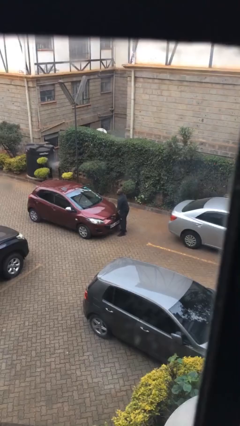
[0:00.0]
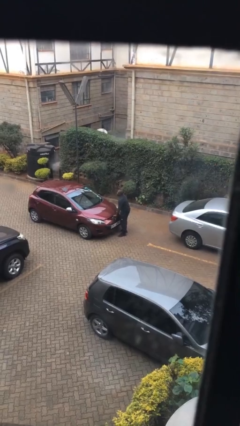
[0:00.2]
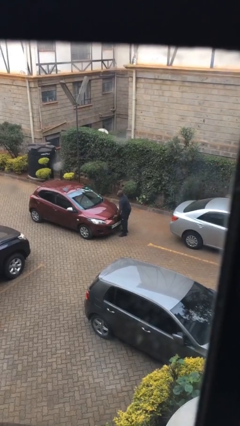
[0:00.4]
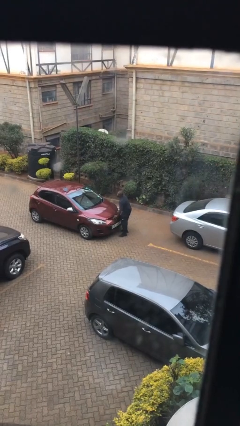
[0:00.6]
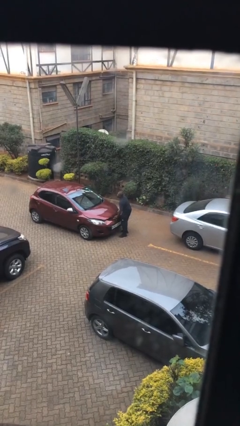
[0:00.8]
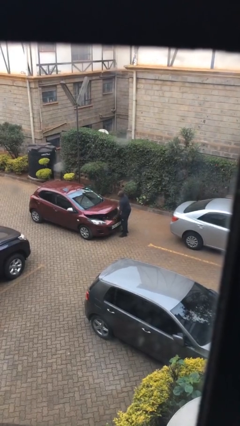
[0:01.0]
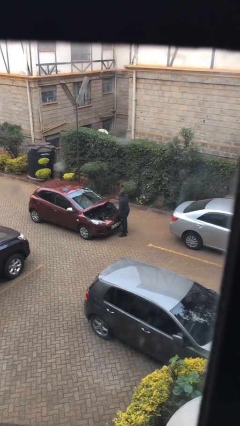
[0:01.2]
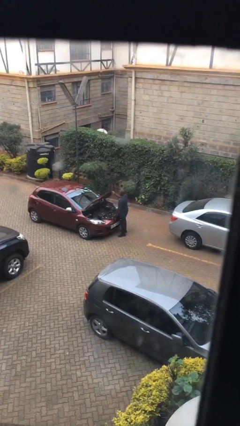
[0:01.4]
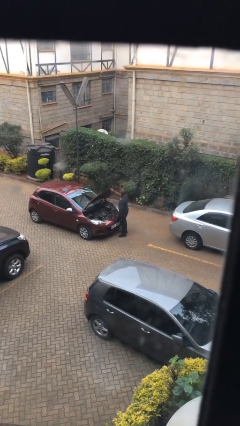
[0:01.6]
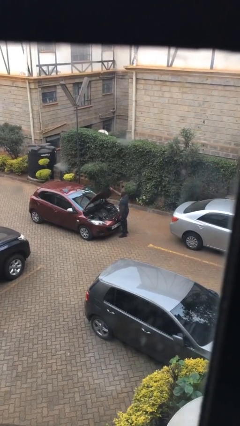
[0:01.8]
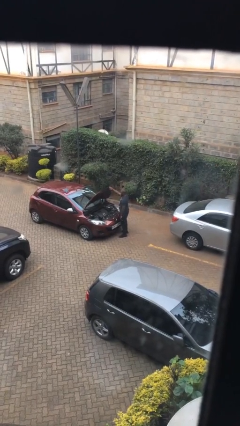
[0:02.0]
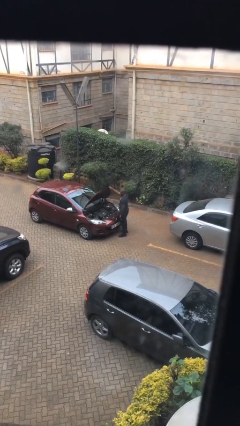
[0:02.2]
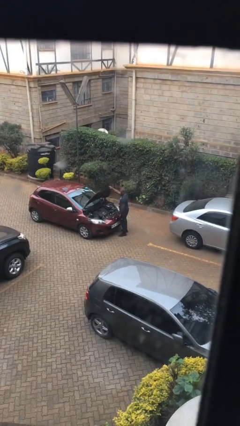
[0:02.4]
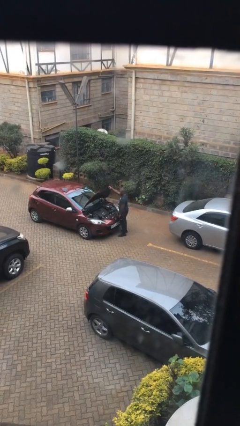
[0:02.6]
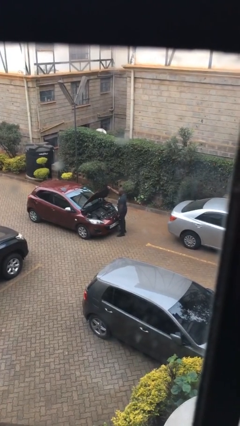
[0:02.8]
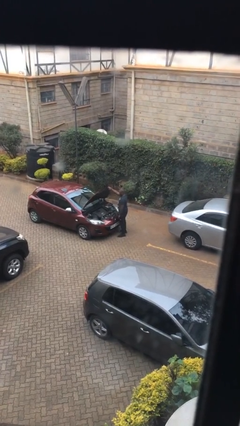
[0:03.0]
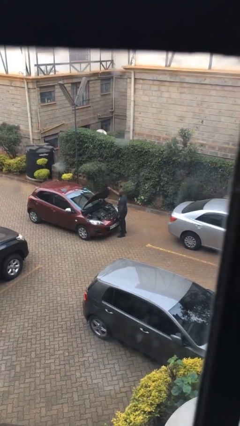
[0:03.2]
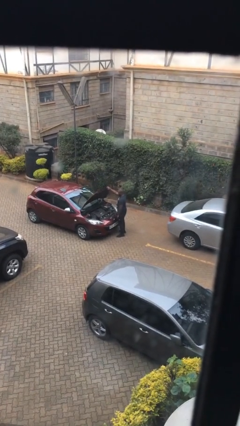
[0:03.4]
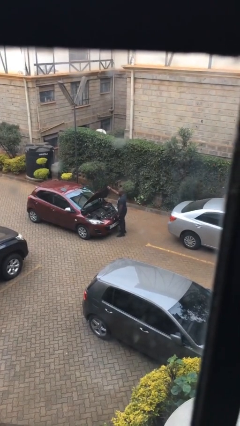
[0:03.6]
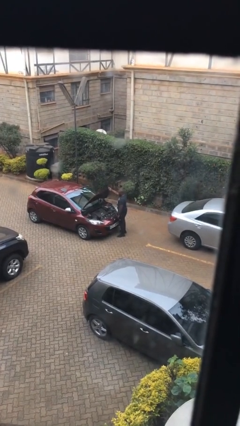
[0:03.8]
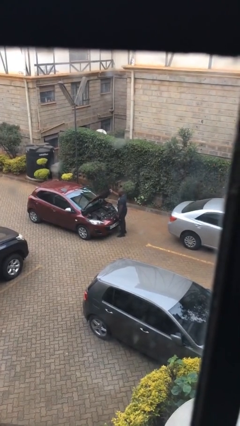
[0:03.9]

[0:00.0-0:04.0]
person opens car hood

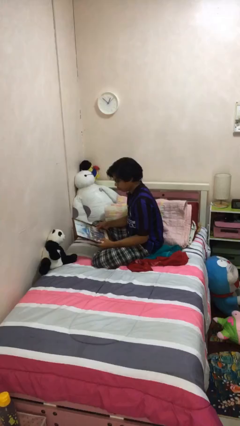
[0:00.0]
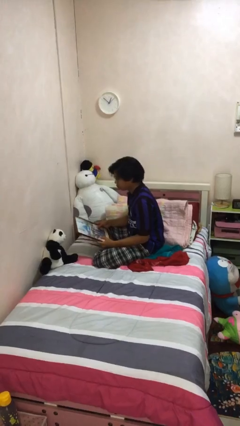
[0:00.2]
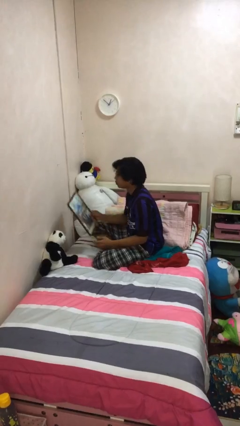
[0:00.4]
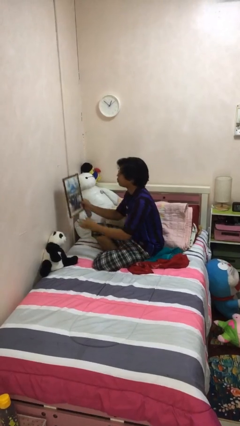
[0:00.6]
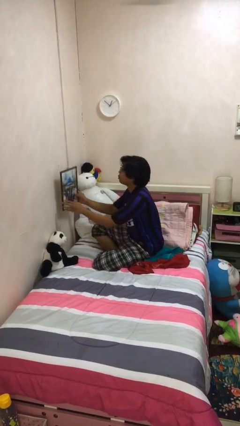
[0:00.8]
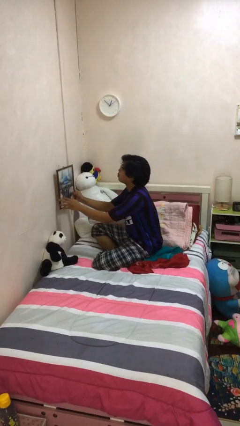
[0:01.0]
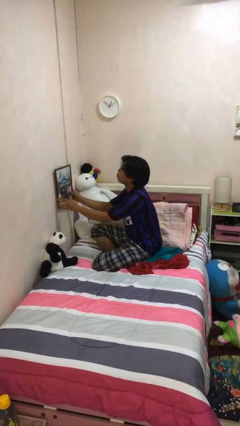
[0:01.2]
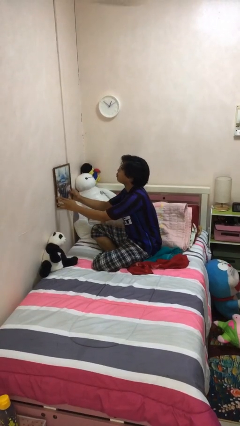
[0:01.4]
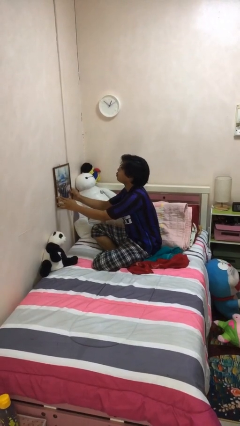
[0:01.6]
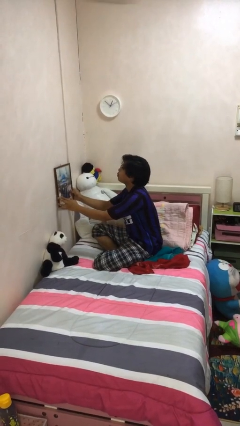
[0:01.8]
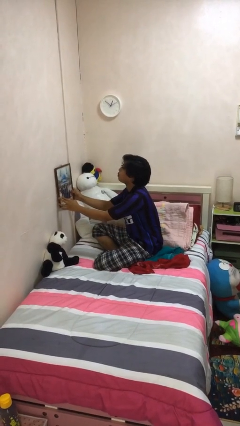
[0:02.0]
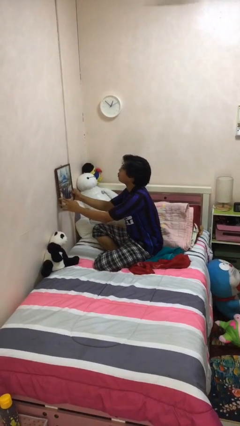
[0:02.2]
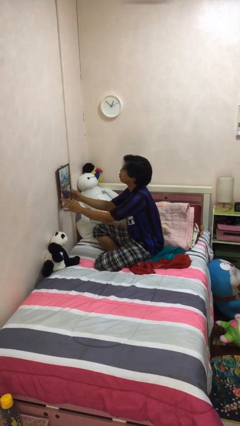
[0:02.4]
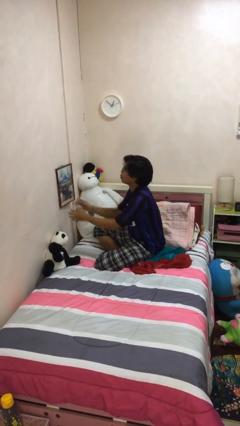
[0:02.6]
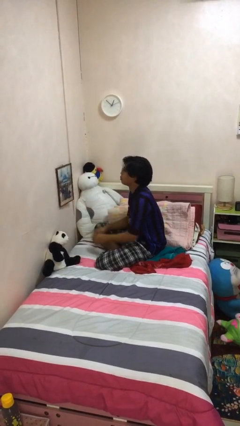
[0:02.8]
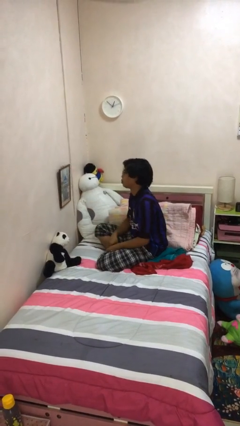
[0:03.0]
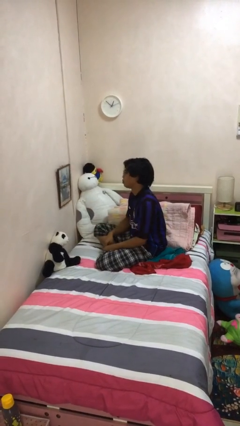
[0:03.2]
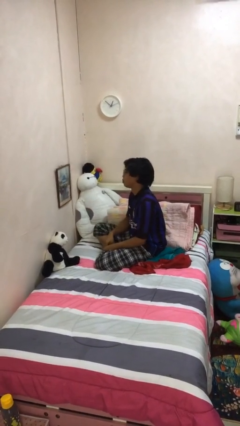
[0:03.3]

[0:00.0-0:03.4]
person puts up picture frame

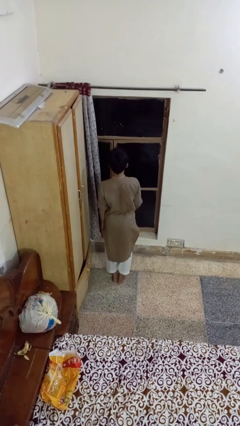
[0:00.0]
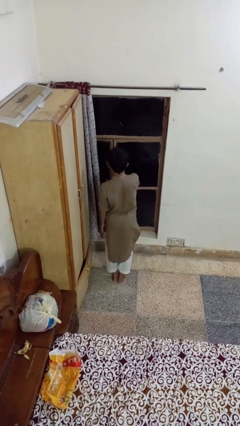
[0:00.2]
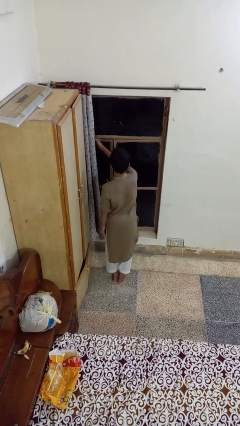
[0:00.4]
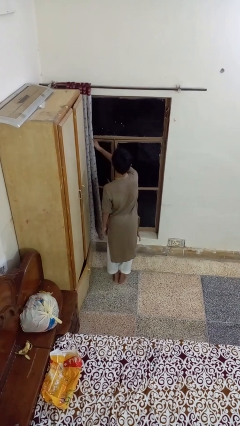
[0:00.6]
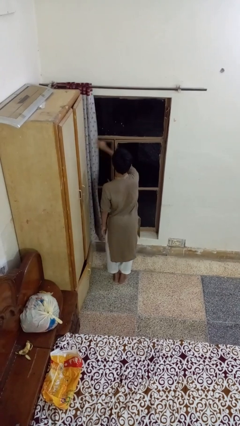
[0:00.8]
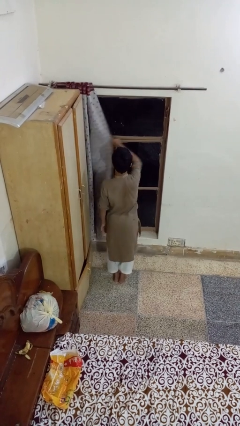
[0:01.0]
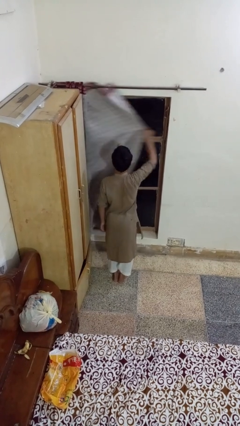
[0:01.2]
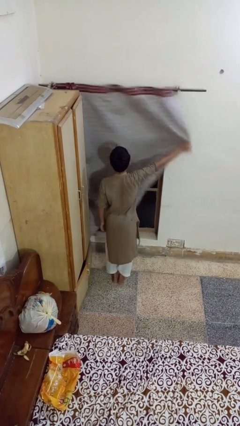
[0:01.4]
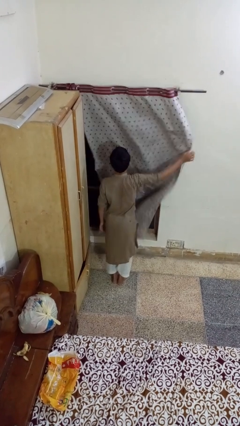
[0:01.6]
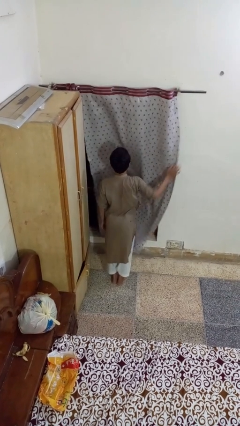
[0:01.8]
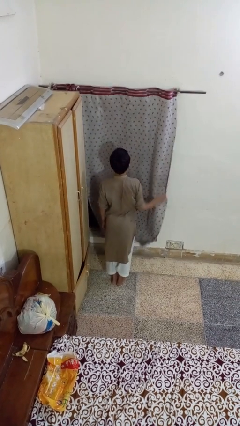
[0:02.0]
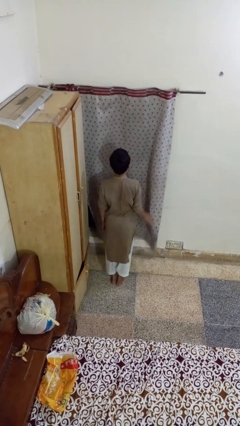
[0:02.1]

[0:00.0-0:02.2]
person closes curtains

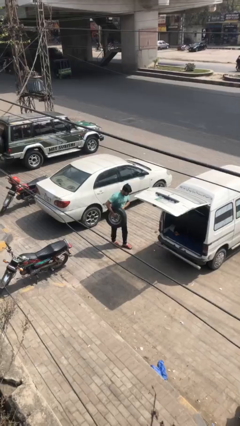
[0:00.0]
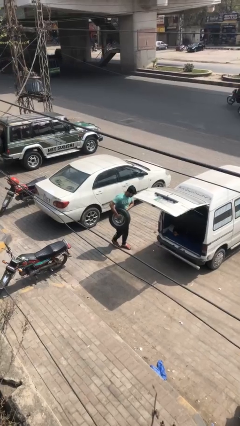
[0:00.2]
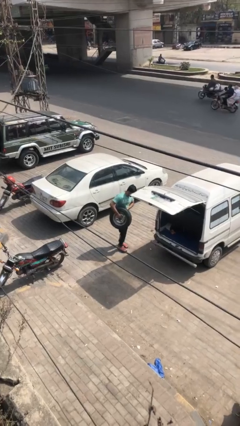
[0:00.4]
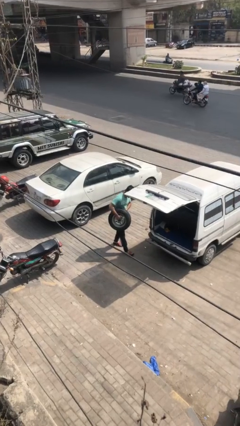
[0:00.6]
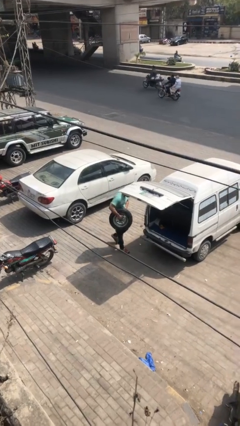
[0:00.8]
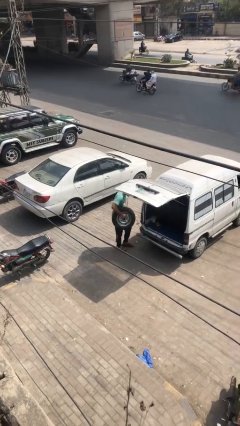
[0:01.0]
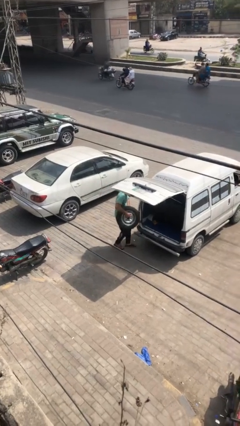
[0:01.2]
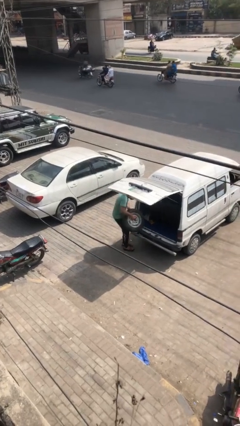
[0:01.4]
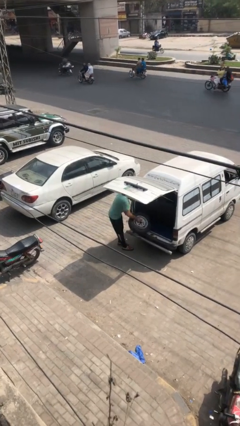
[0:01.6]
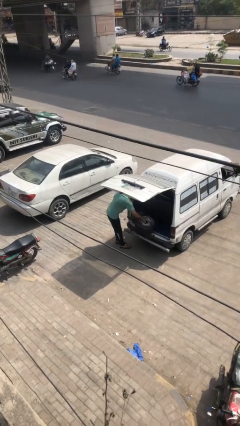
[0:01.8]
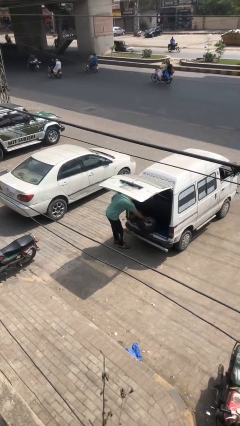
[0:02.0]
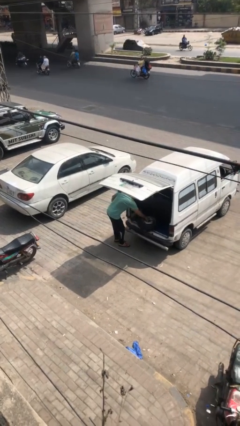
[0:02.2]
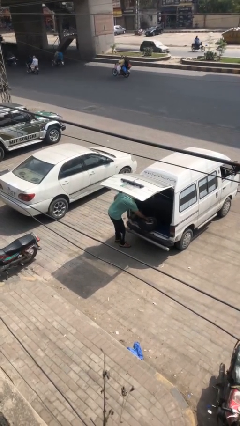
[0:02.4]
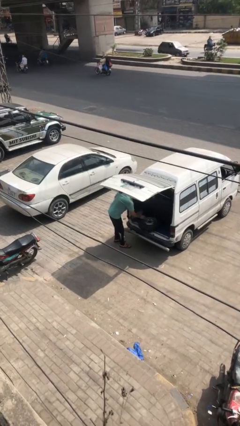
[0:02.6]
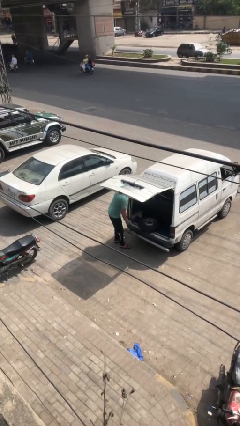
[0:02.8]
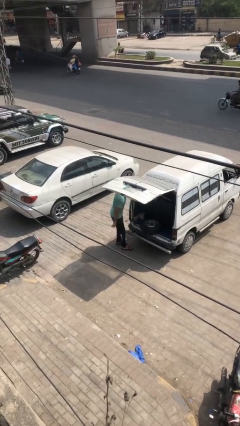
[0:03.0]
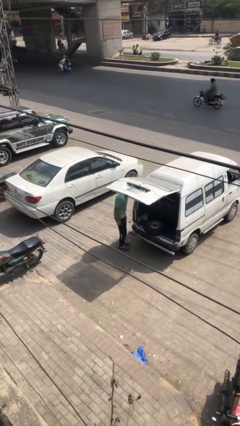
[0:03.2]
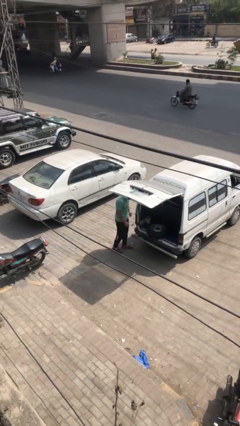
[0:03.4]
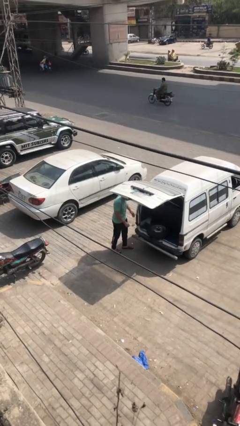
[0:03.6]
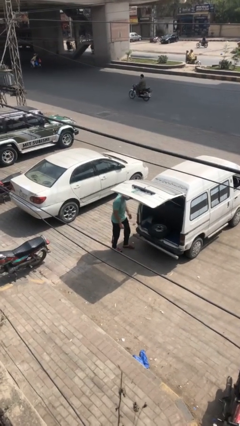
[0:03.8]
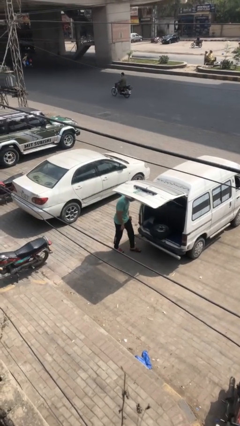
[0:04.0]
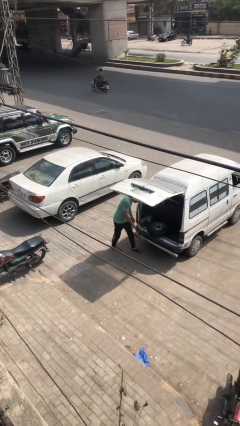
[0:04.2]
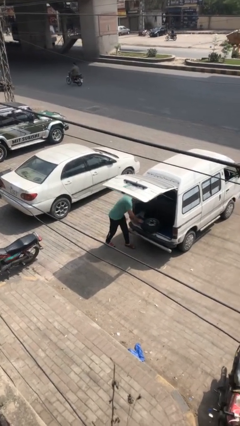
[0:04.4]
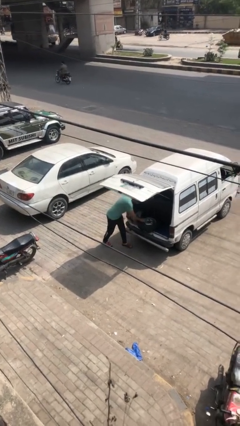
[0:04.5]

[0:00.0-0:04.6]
person loads car

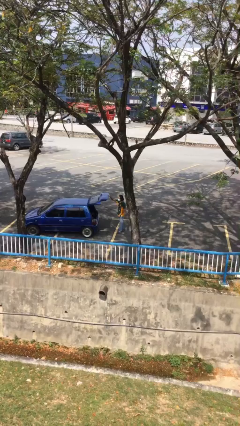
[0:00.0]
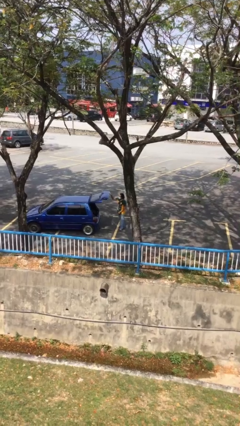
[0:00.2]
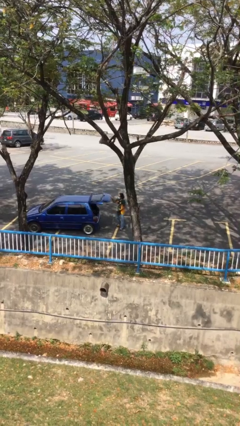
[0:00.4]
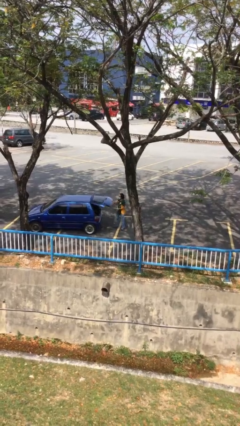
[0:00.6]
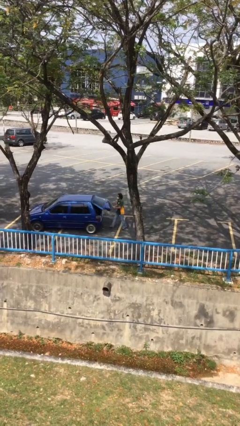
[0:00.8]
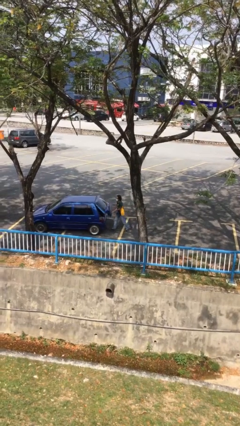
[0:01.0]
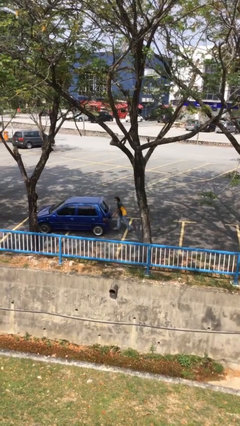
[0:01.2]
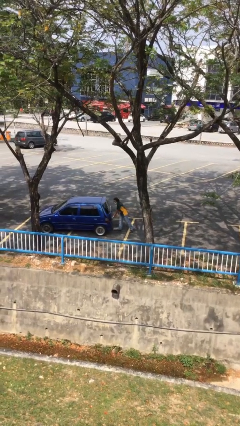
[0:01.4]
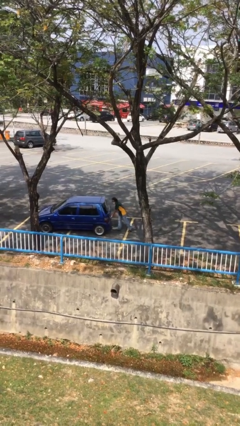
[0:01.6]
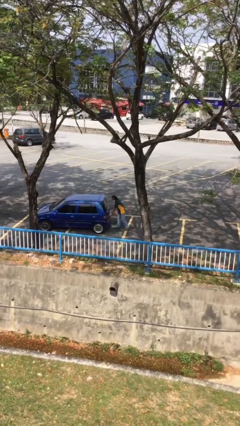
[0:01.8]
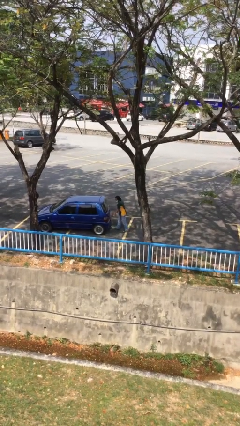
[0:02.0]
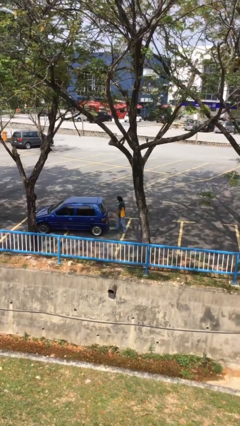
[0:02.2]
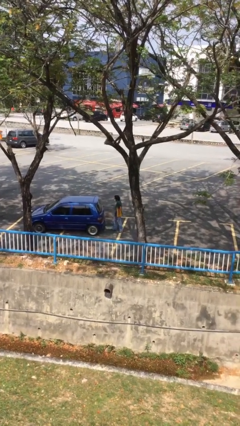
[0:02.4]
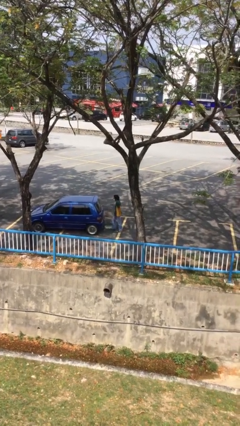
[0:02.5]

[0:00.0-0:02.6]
person closes car trunk

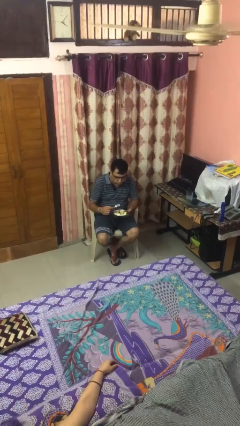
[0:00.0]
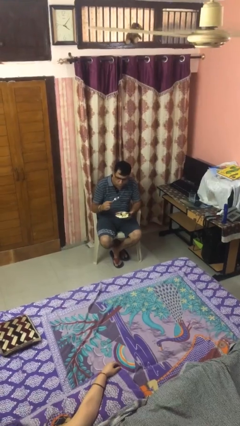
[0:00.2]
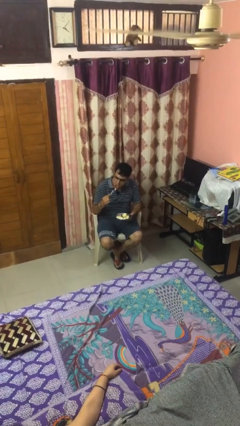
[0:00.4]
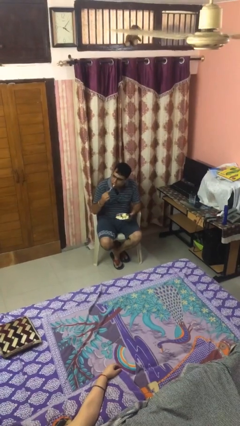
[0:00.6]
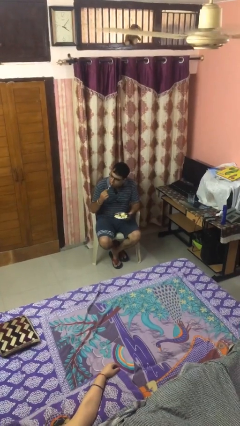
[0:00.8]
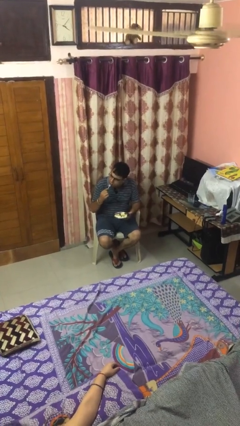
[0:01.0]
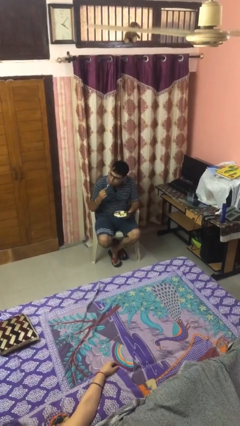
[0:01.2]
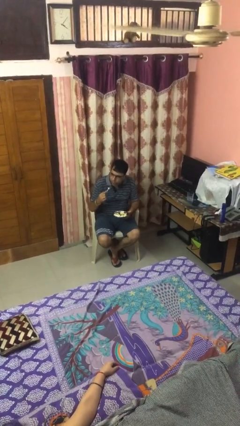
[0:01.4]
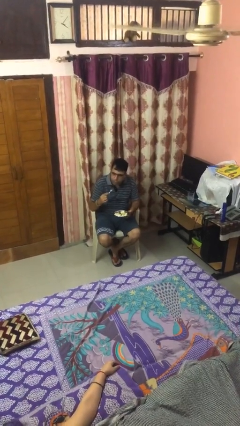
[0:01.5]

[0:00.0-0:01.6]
person eats with utensil
